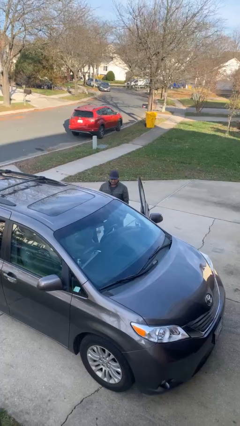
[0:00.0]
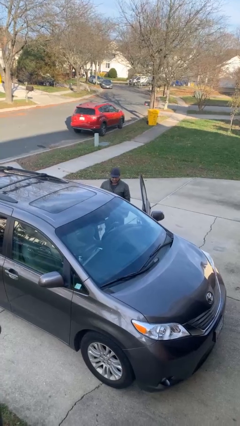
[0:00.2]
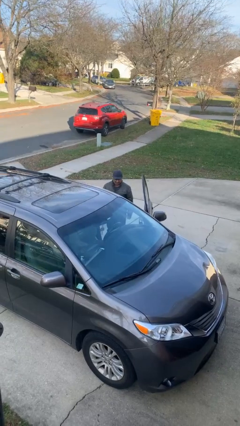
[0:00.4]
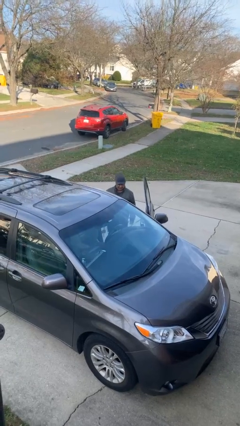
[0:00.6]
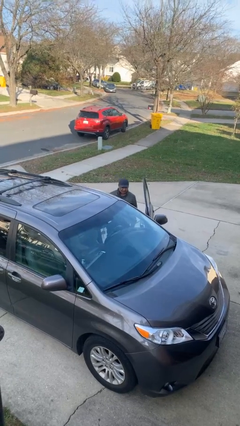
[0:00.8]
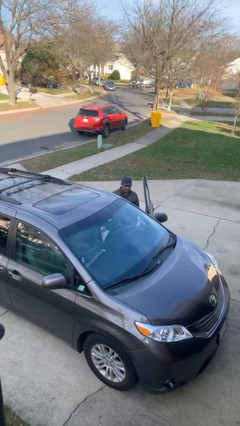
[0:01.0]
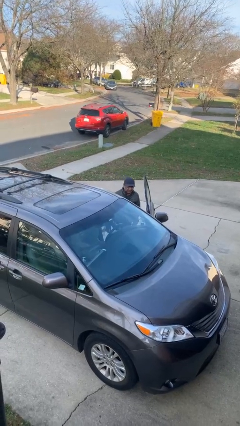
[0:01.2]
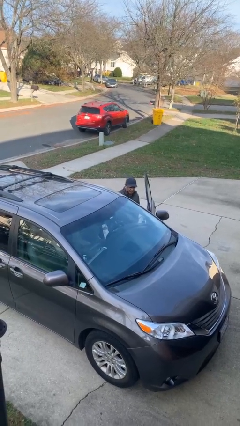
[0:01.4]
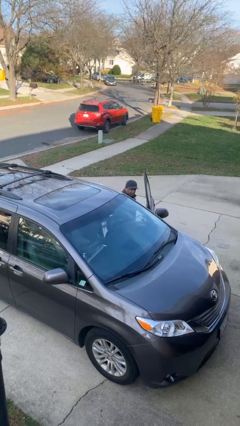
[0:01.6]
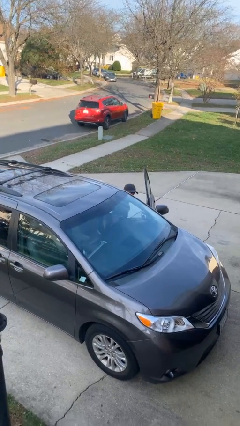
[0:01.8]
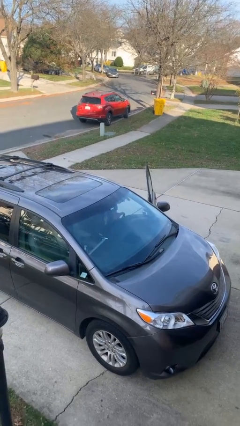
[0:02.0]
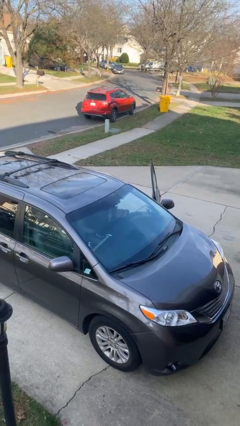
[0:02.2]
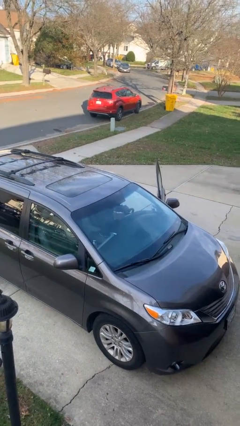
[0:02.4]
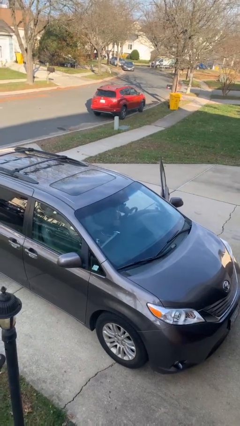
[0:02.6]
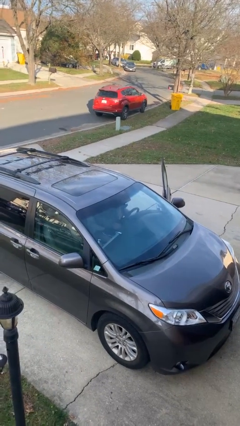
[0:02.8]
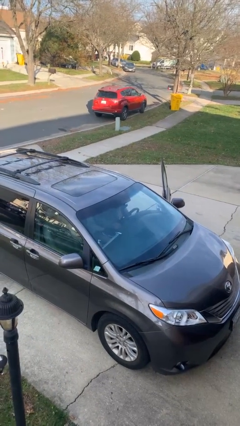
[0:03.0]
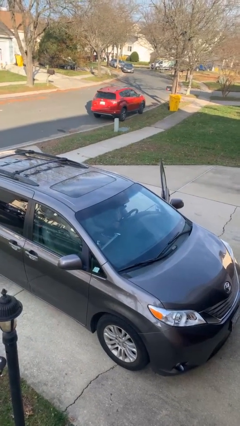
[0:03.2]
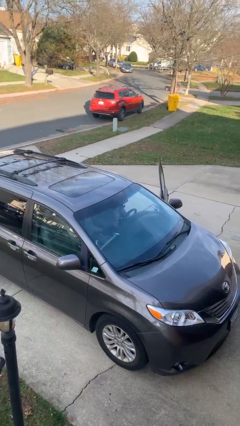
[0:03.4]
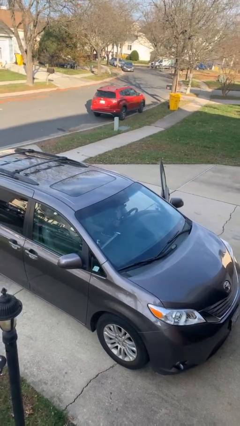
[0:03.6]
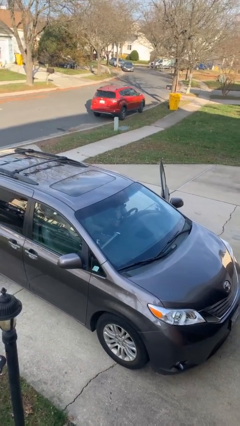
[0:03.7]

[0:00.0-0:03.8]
person enters car

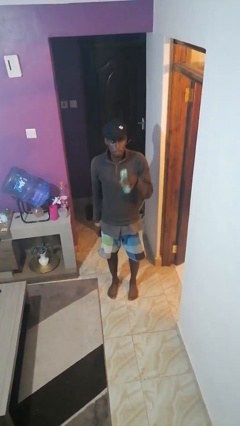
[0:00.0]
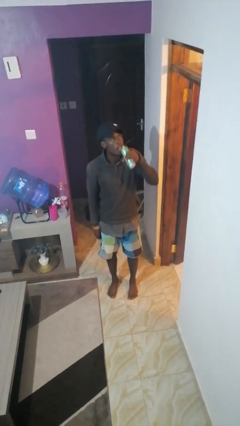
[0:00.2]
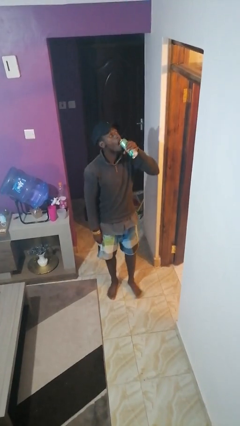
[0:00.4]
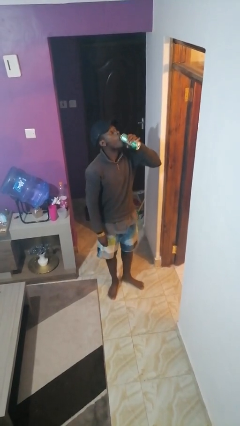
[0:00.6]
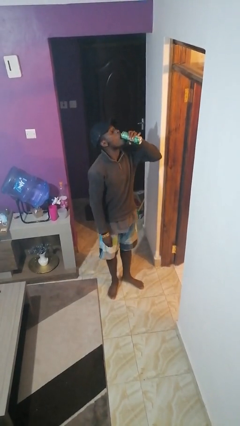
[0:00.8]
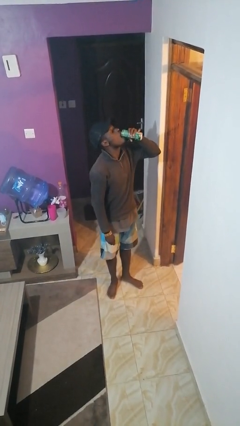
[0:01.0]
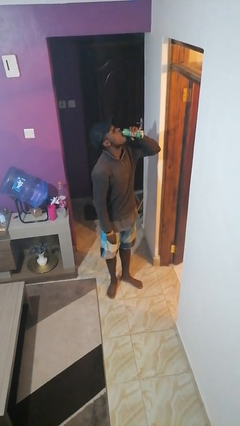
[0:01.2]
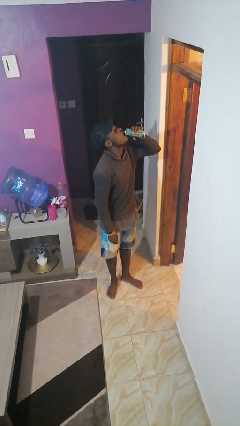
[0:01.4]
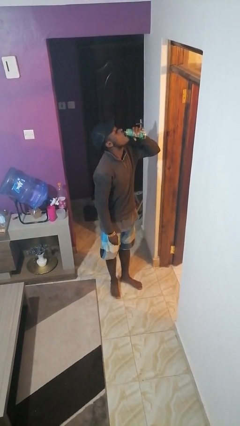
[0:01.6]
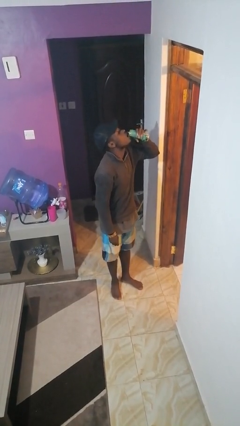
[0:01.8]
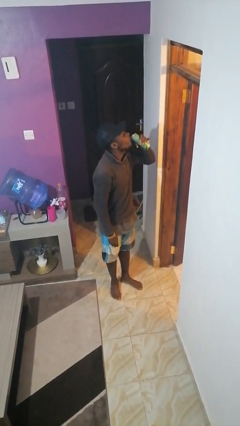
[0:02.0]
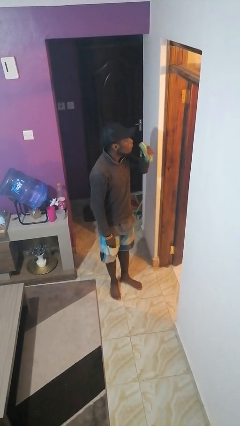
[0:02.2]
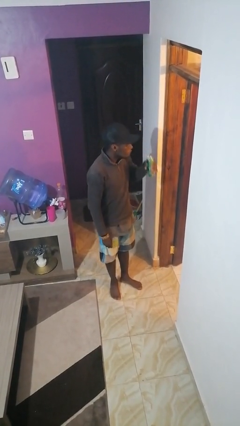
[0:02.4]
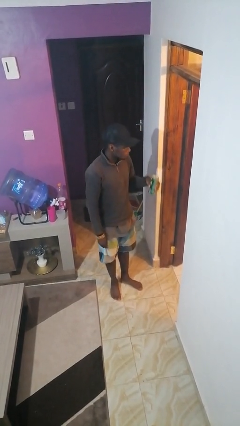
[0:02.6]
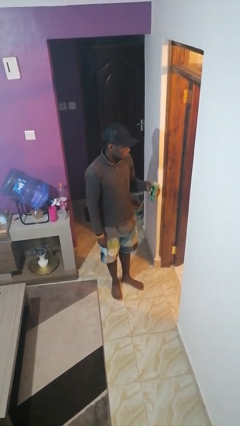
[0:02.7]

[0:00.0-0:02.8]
person drinks from beverage can

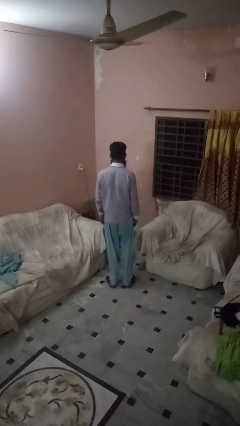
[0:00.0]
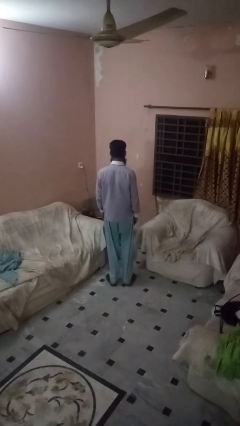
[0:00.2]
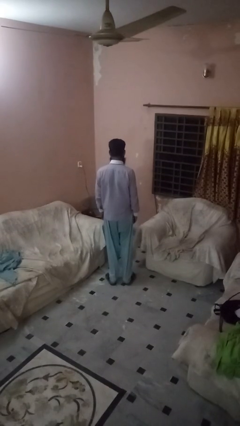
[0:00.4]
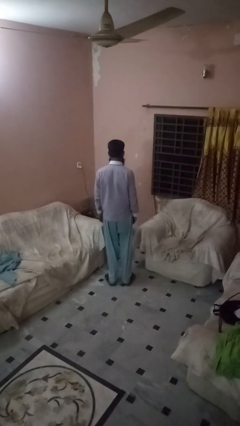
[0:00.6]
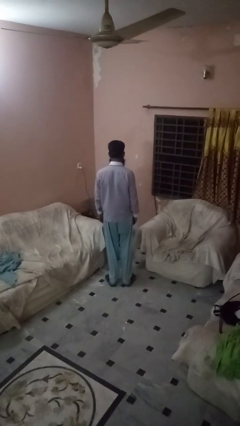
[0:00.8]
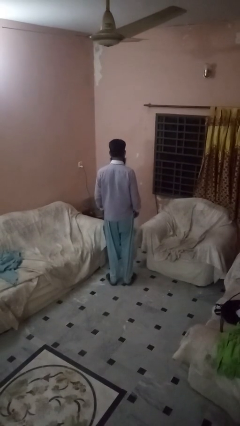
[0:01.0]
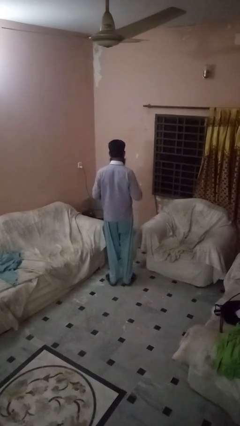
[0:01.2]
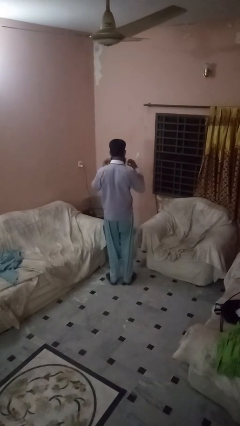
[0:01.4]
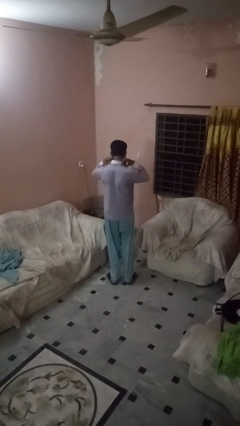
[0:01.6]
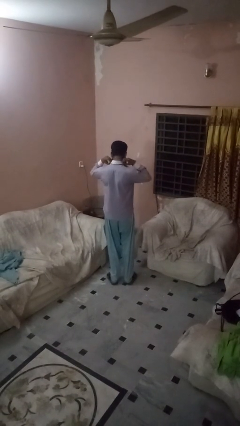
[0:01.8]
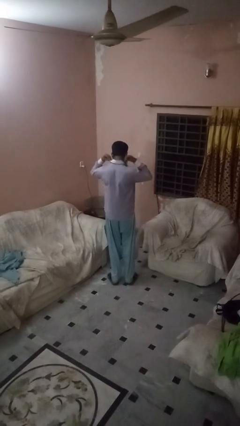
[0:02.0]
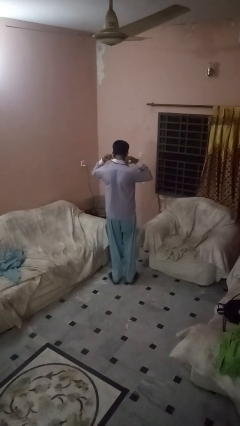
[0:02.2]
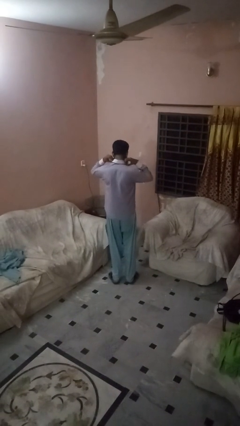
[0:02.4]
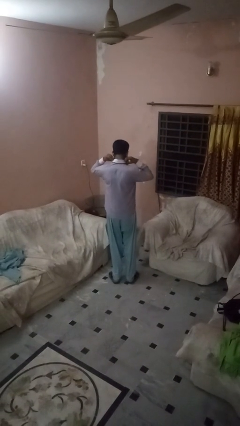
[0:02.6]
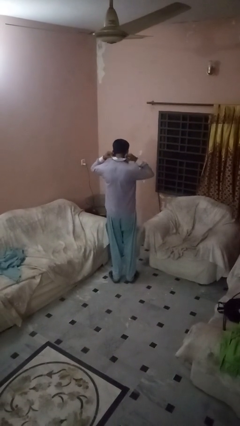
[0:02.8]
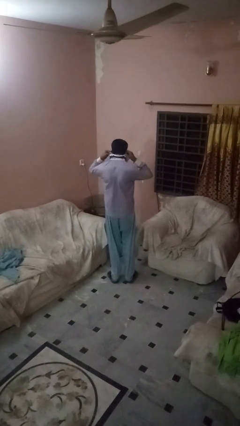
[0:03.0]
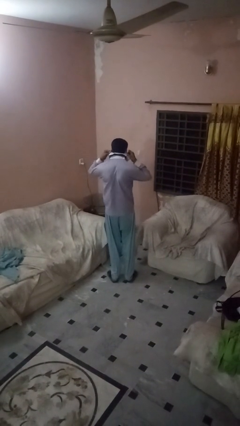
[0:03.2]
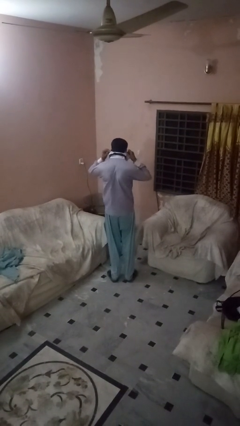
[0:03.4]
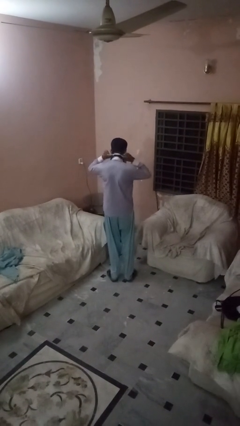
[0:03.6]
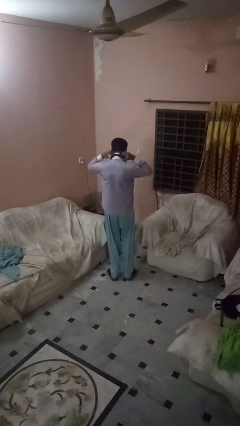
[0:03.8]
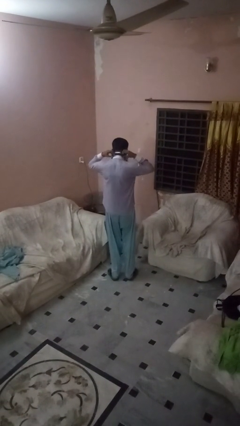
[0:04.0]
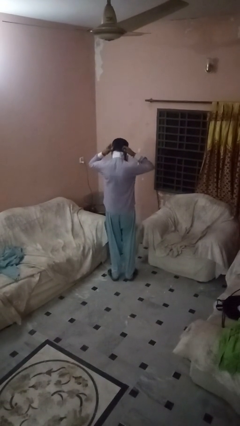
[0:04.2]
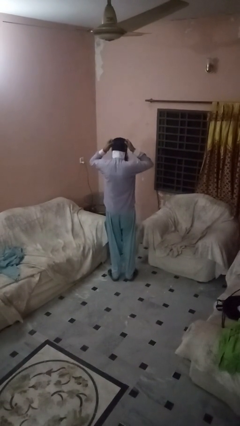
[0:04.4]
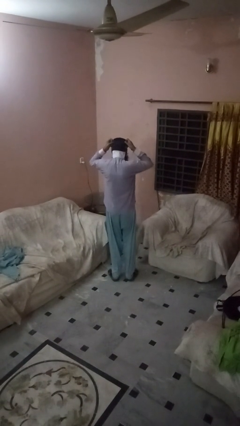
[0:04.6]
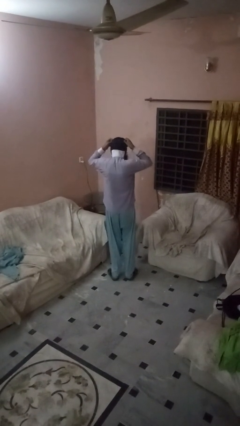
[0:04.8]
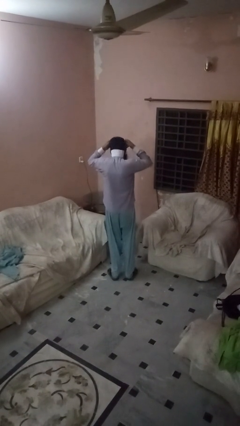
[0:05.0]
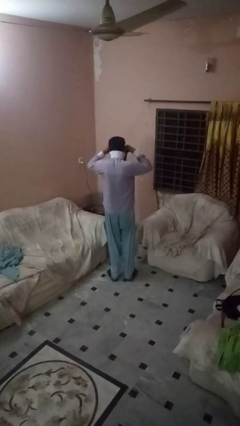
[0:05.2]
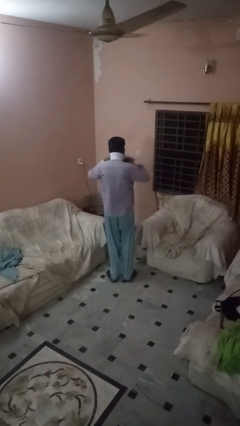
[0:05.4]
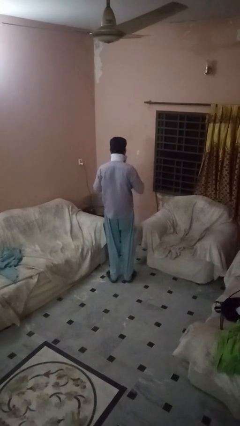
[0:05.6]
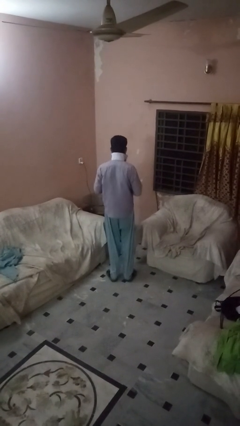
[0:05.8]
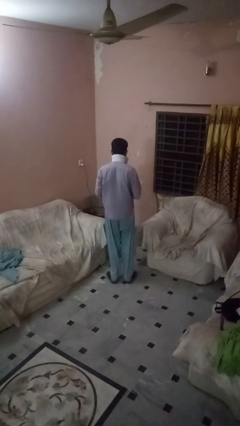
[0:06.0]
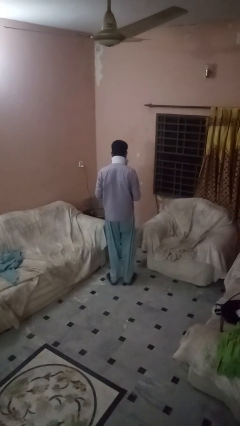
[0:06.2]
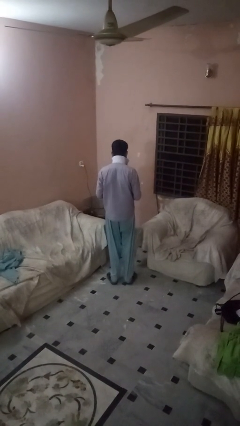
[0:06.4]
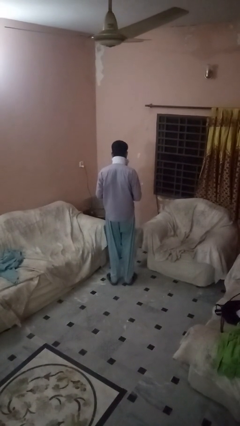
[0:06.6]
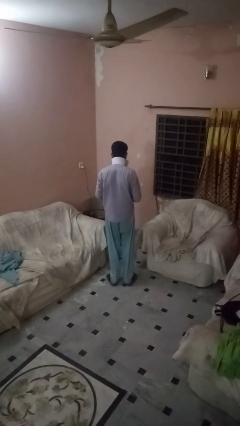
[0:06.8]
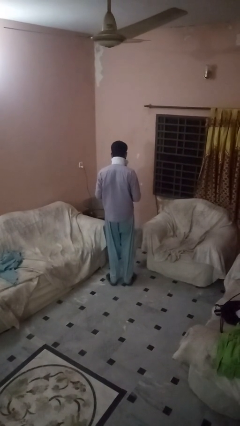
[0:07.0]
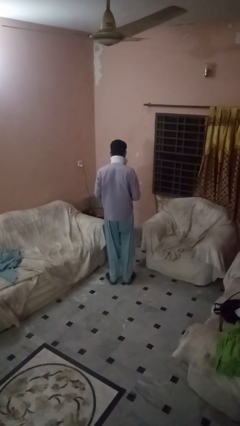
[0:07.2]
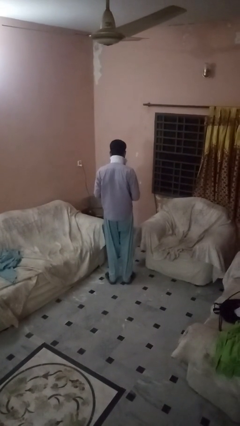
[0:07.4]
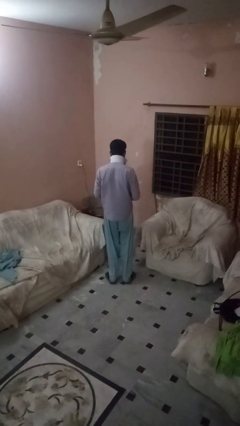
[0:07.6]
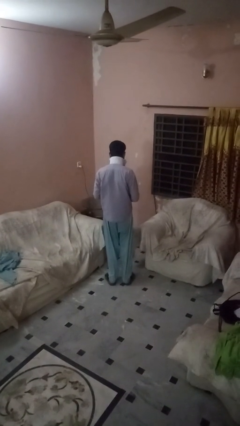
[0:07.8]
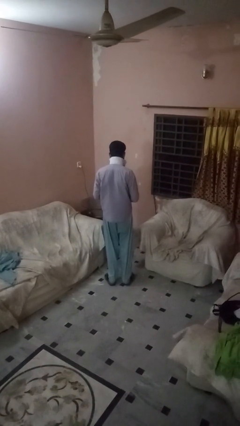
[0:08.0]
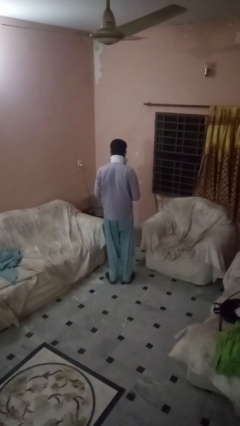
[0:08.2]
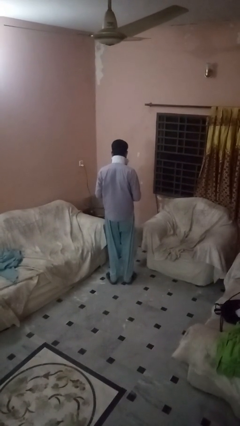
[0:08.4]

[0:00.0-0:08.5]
person takes off necktie

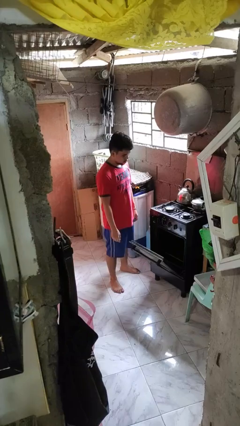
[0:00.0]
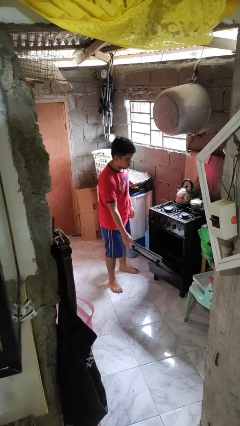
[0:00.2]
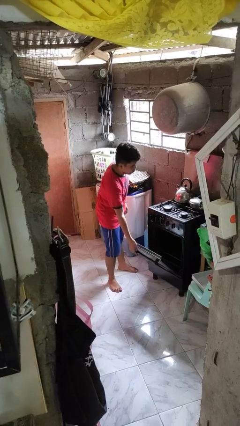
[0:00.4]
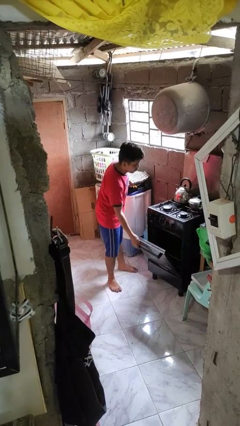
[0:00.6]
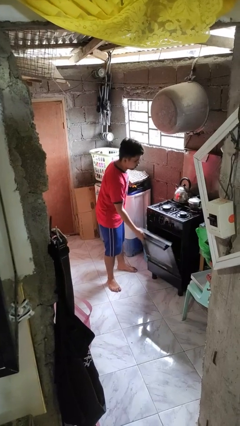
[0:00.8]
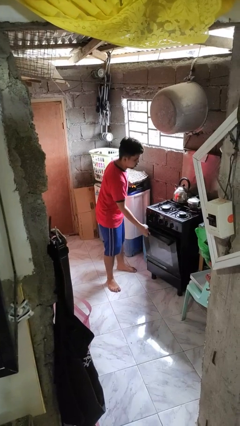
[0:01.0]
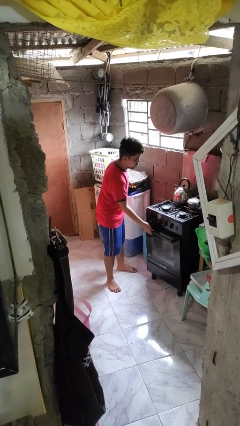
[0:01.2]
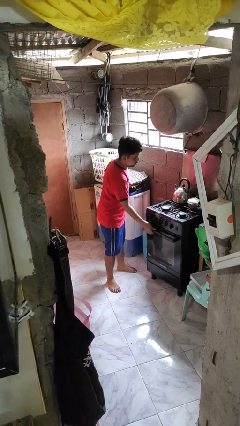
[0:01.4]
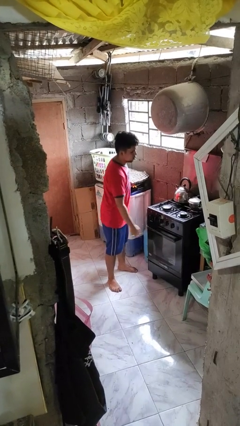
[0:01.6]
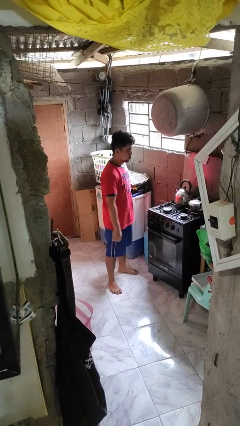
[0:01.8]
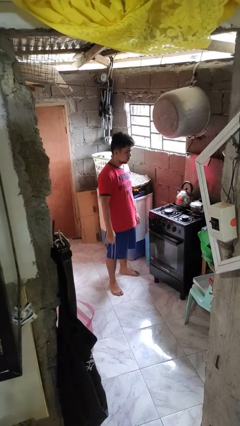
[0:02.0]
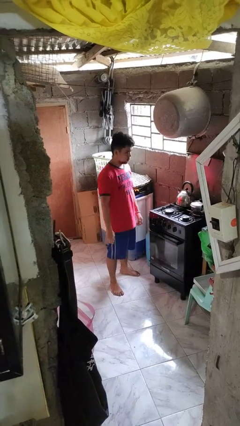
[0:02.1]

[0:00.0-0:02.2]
person closes oven door

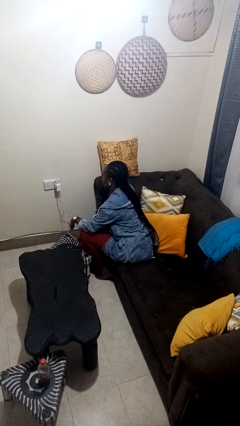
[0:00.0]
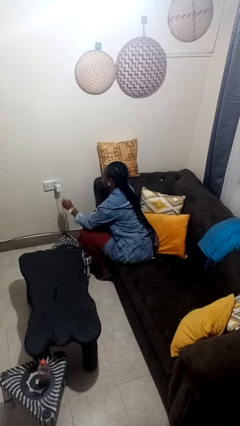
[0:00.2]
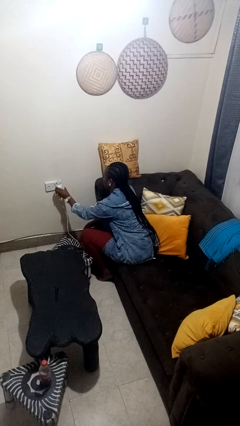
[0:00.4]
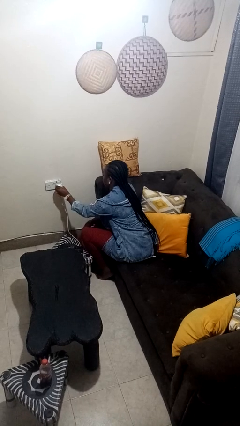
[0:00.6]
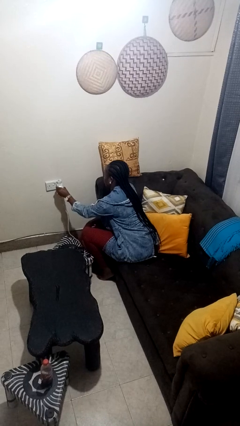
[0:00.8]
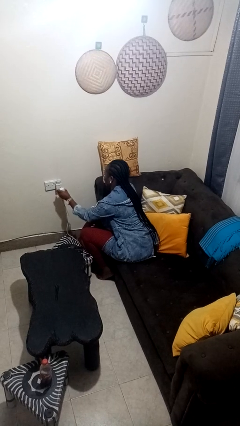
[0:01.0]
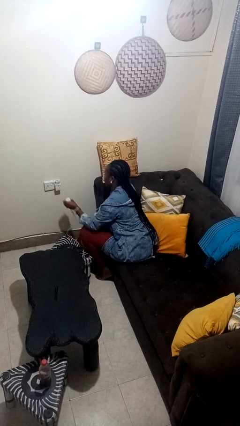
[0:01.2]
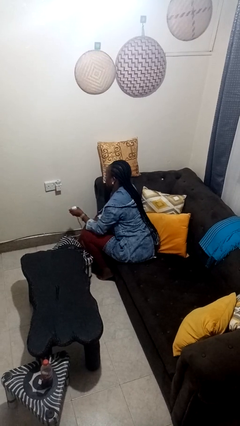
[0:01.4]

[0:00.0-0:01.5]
person unplugs from electrical socket
